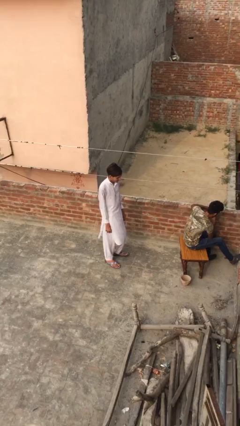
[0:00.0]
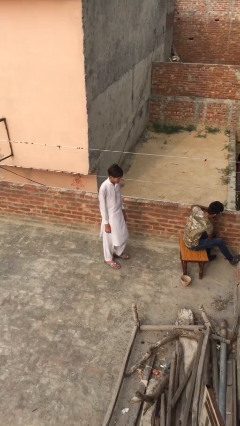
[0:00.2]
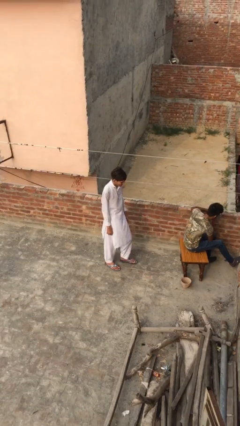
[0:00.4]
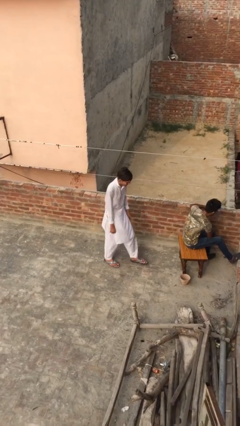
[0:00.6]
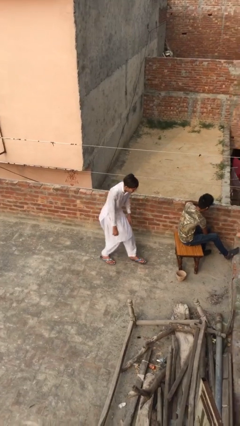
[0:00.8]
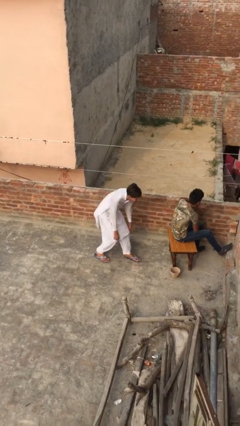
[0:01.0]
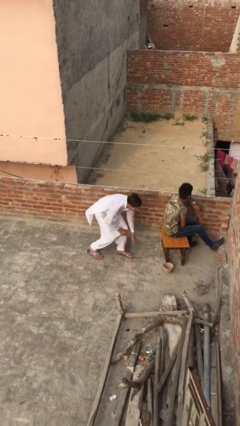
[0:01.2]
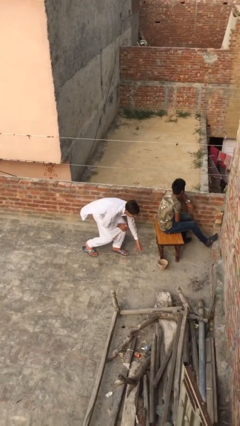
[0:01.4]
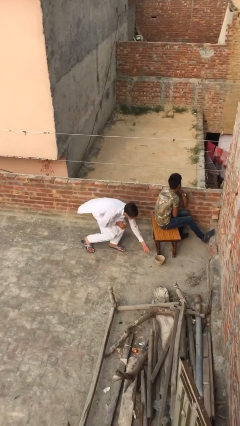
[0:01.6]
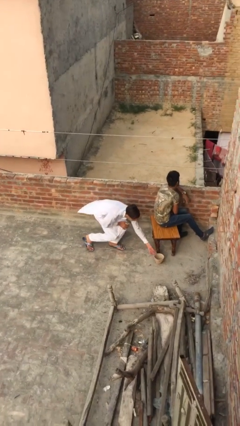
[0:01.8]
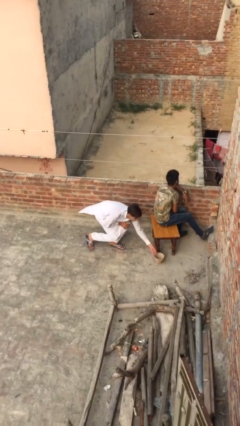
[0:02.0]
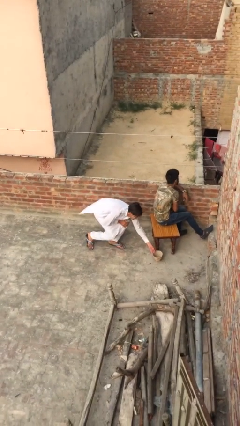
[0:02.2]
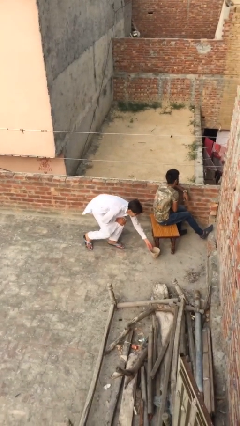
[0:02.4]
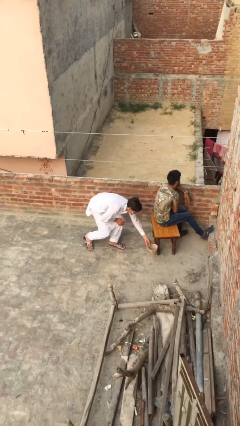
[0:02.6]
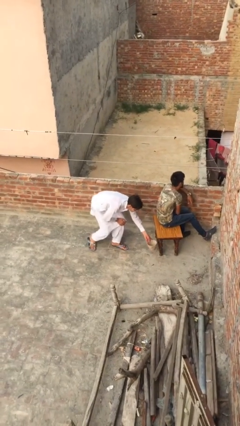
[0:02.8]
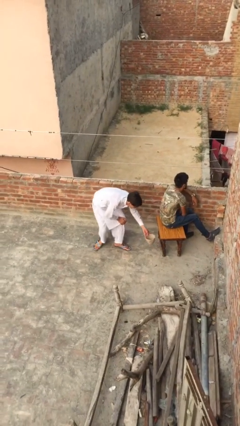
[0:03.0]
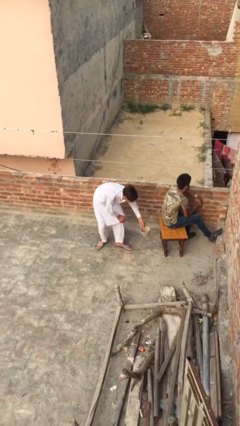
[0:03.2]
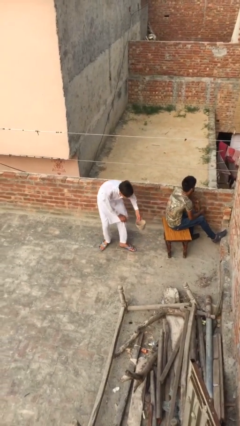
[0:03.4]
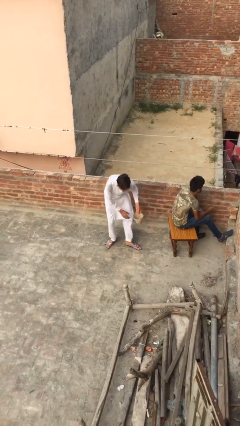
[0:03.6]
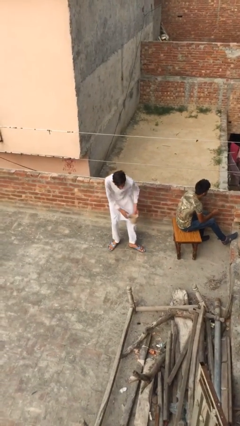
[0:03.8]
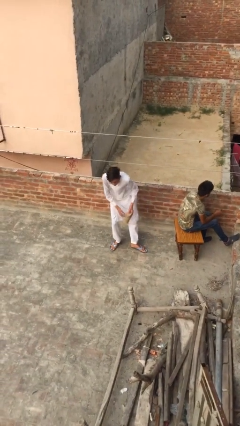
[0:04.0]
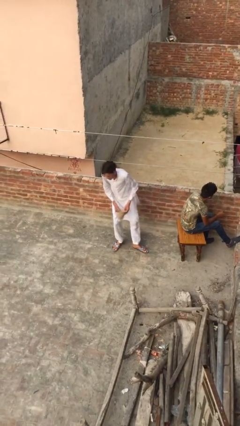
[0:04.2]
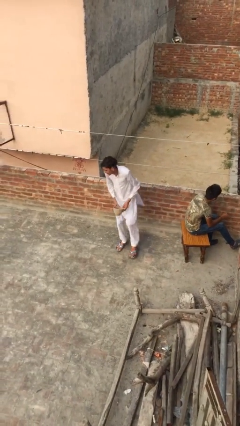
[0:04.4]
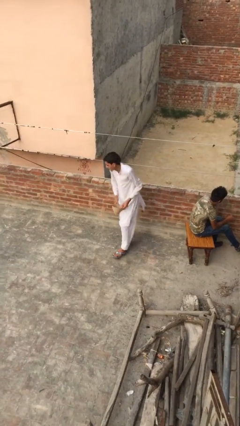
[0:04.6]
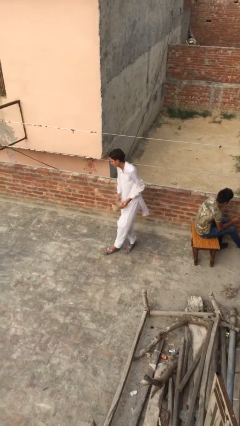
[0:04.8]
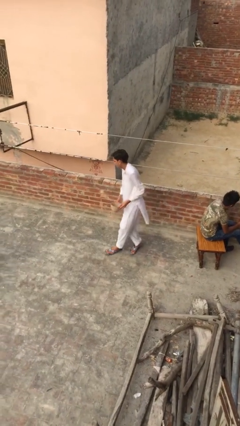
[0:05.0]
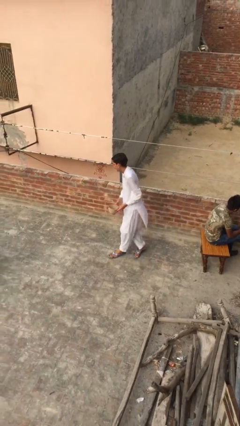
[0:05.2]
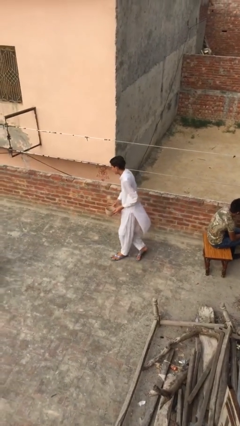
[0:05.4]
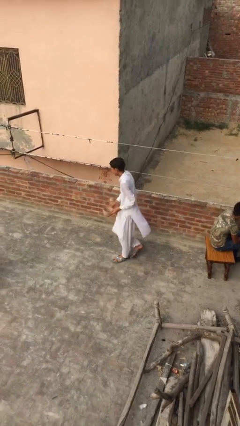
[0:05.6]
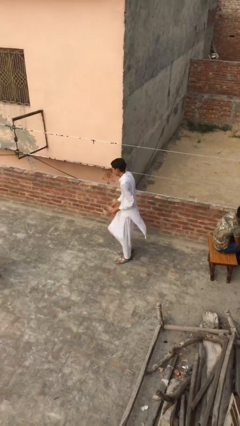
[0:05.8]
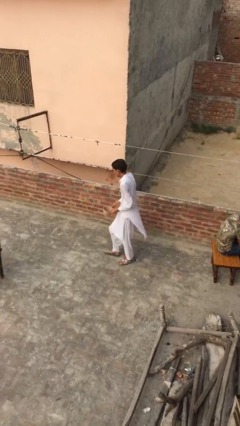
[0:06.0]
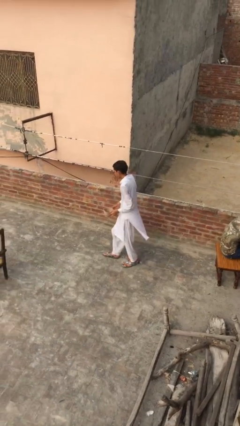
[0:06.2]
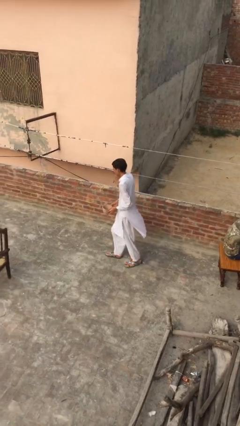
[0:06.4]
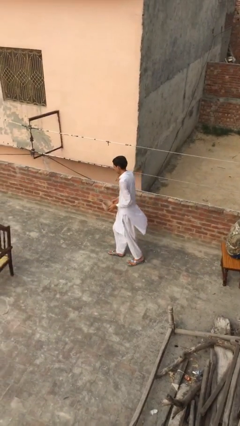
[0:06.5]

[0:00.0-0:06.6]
person steals object from person

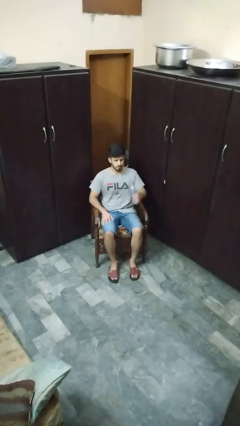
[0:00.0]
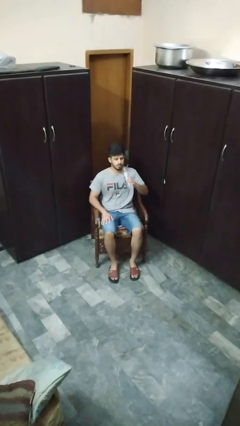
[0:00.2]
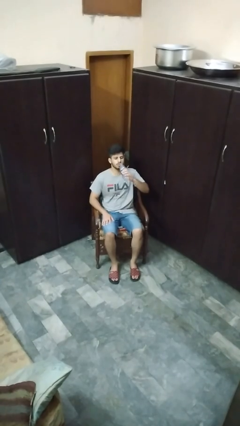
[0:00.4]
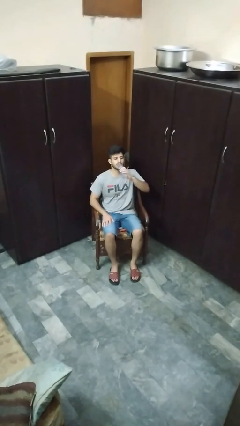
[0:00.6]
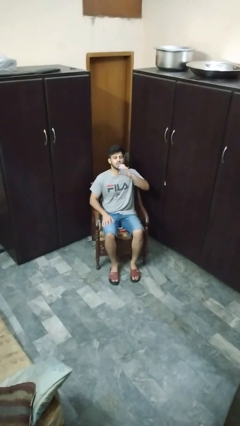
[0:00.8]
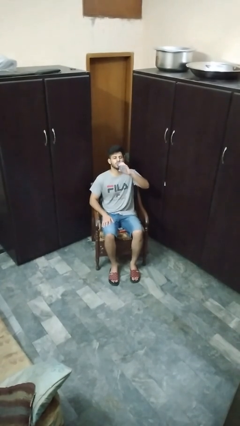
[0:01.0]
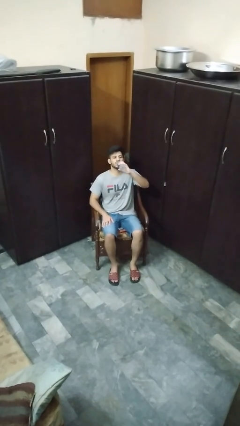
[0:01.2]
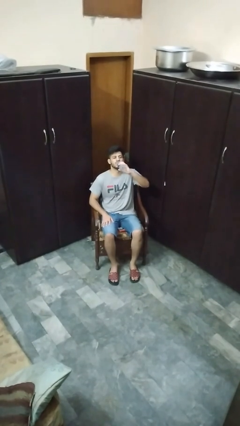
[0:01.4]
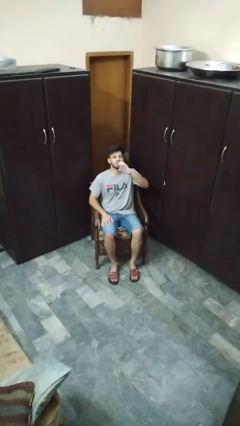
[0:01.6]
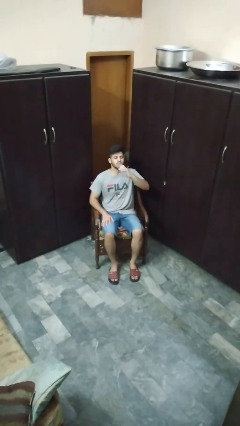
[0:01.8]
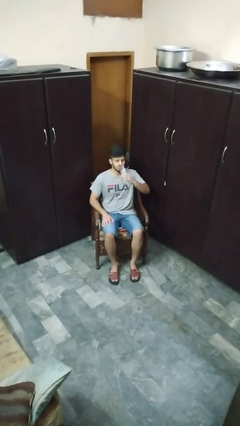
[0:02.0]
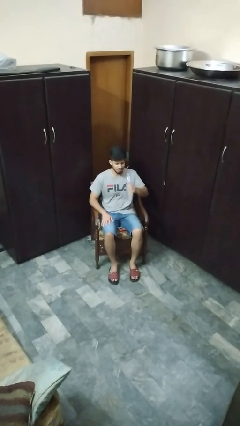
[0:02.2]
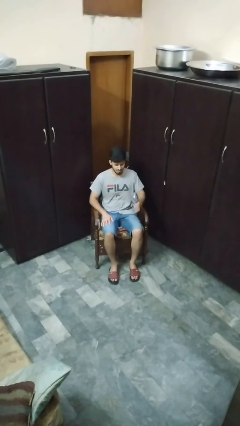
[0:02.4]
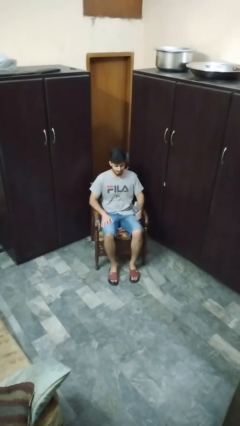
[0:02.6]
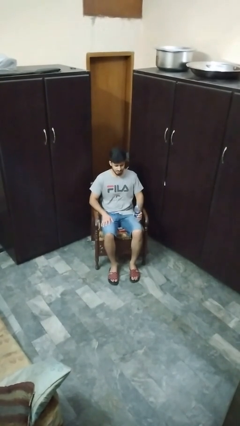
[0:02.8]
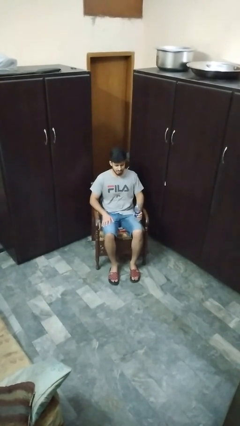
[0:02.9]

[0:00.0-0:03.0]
person drinks from bottle

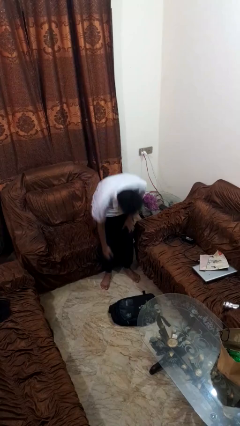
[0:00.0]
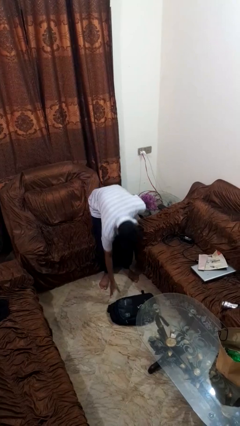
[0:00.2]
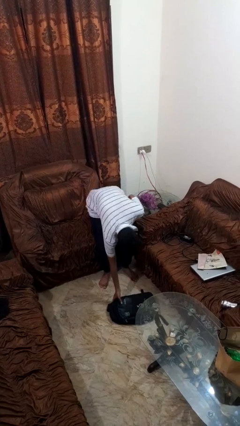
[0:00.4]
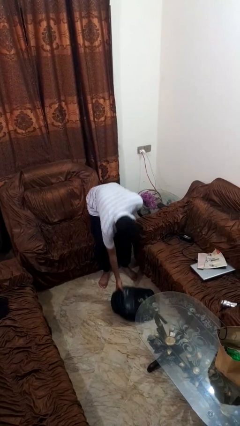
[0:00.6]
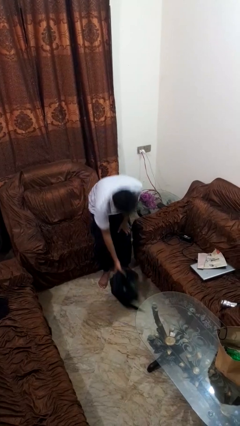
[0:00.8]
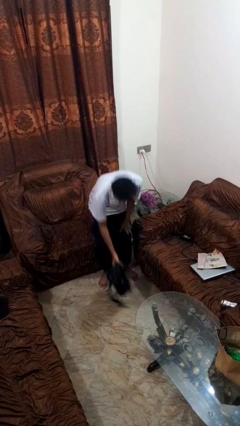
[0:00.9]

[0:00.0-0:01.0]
person picks up object from floor

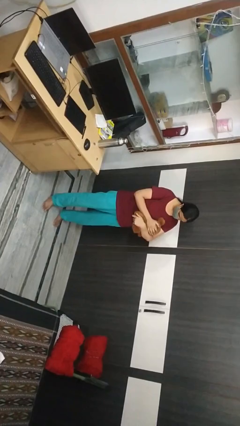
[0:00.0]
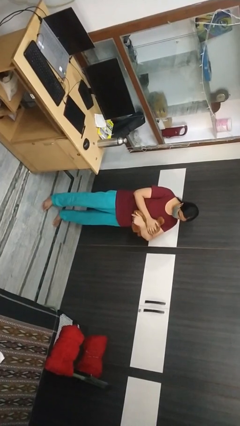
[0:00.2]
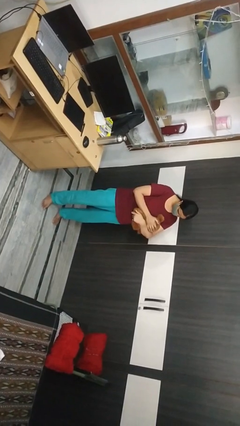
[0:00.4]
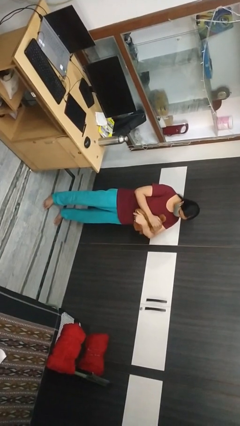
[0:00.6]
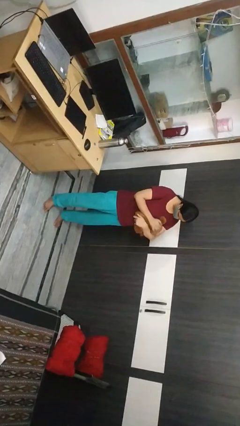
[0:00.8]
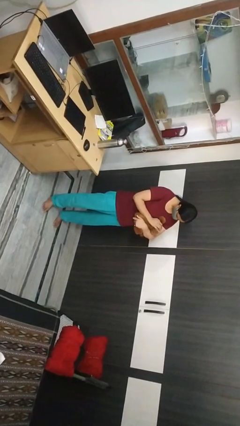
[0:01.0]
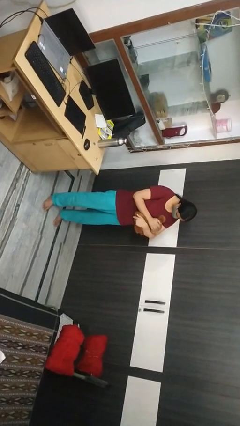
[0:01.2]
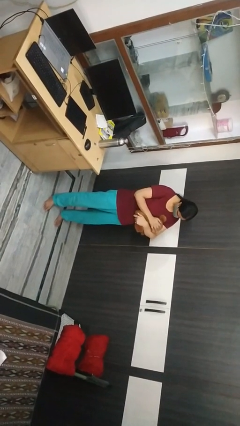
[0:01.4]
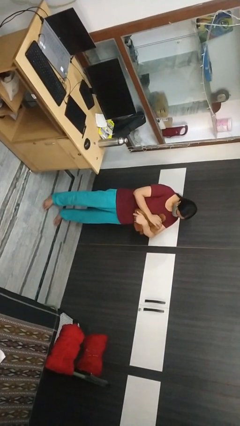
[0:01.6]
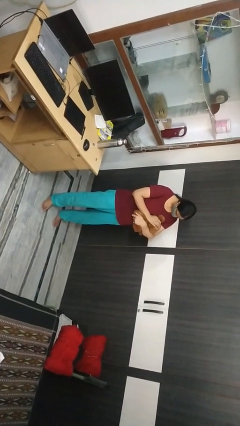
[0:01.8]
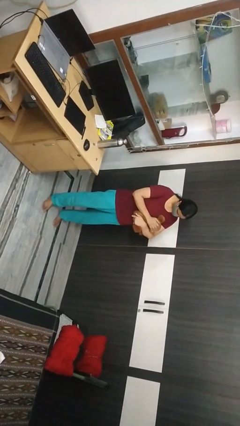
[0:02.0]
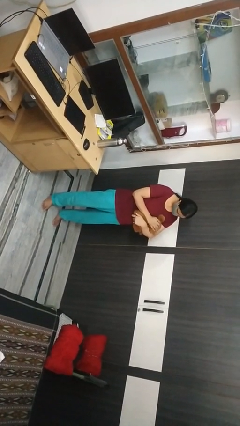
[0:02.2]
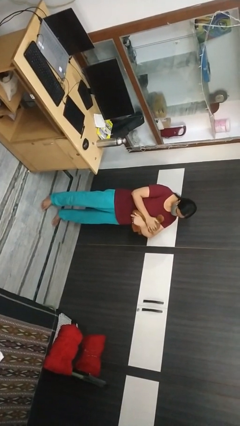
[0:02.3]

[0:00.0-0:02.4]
person pets cat

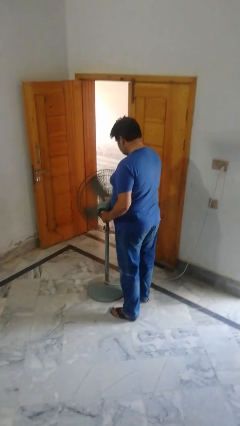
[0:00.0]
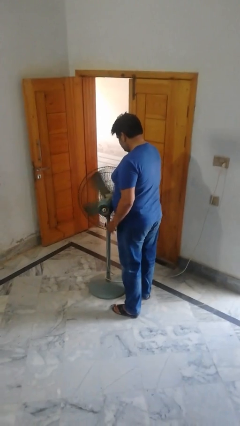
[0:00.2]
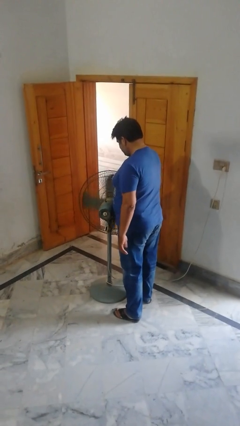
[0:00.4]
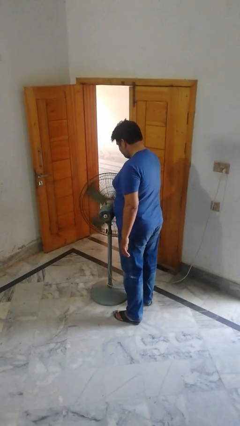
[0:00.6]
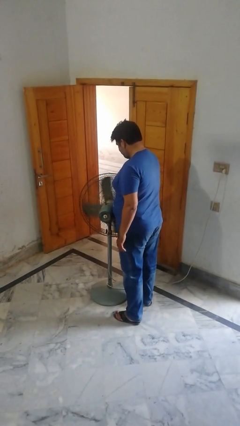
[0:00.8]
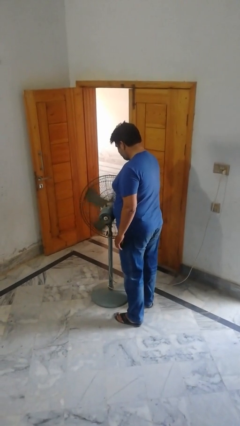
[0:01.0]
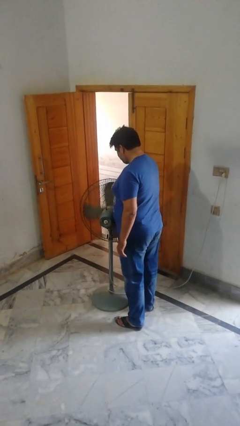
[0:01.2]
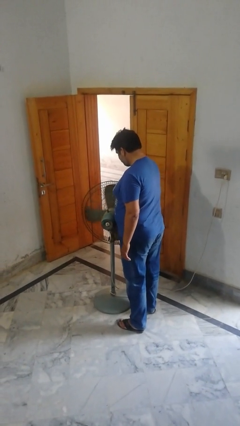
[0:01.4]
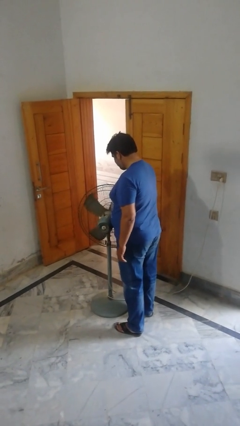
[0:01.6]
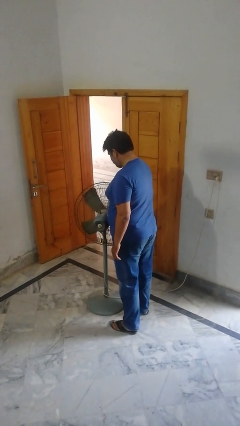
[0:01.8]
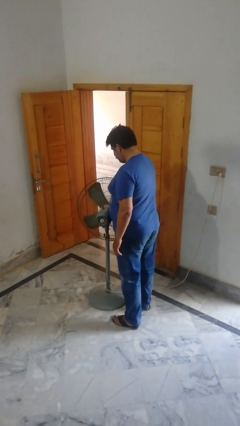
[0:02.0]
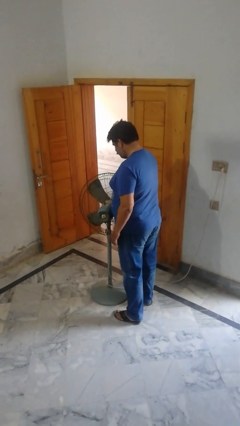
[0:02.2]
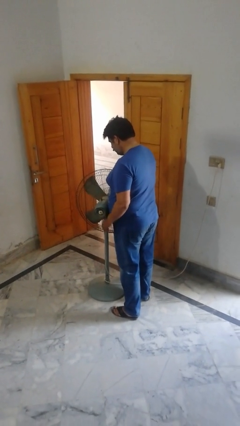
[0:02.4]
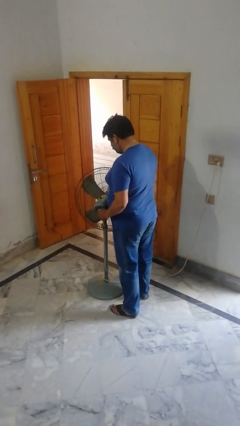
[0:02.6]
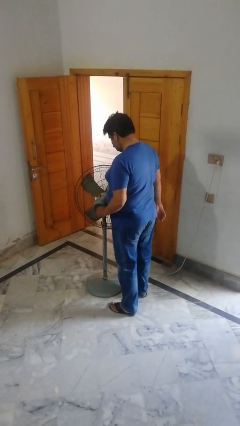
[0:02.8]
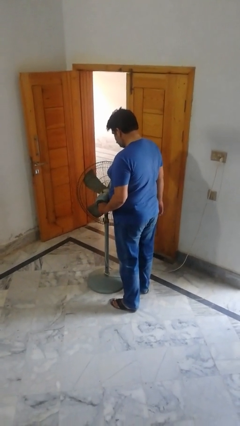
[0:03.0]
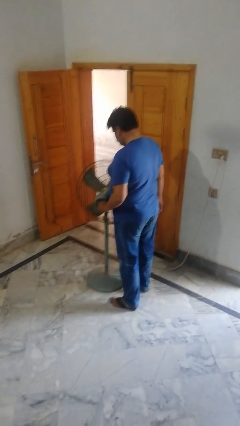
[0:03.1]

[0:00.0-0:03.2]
person turns off fan

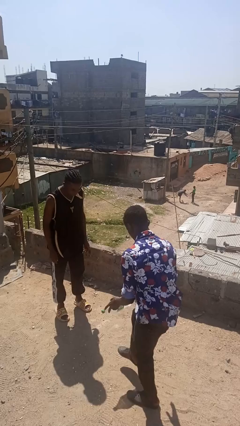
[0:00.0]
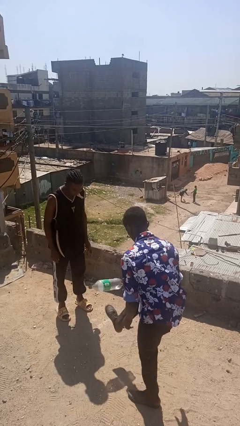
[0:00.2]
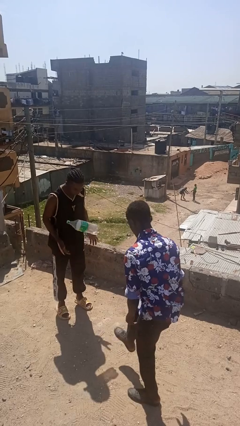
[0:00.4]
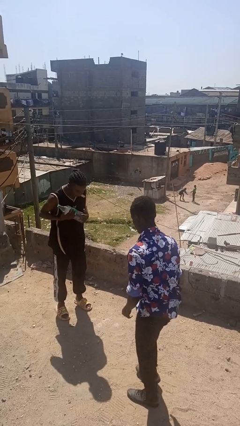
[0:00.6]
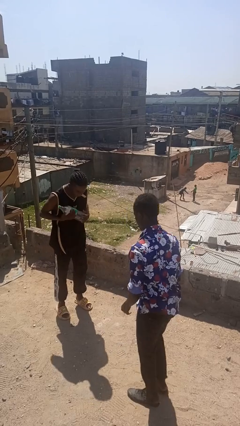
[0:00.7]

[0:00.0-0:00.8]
person kicks object to person
